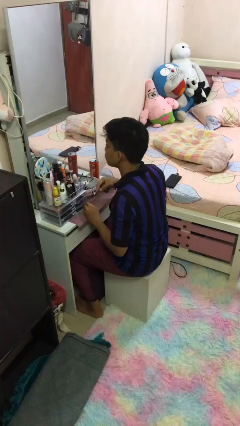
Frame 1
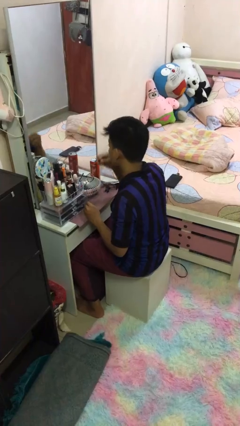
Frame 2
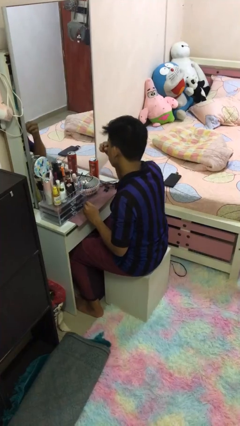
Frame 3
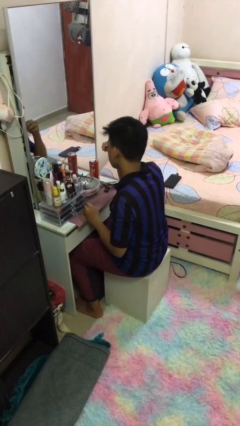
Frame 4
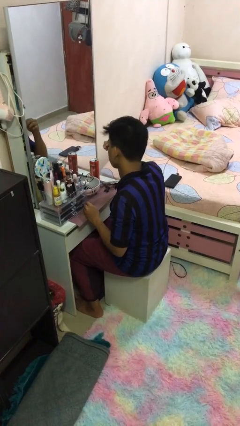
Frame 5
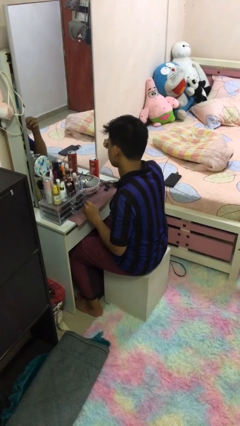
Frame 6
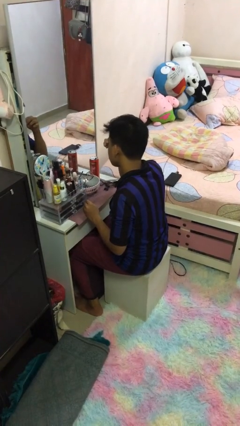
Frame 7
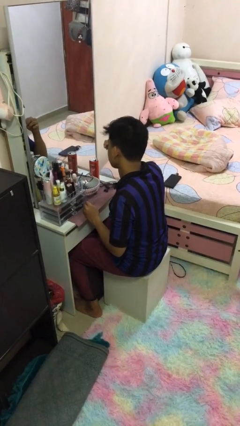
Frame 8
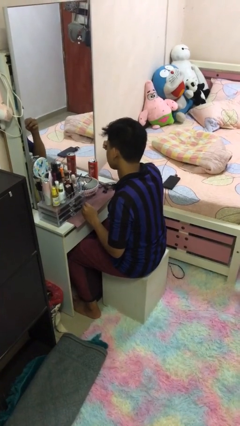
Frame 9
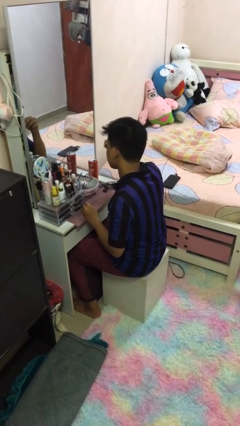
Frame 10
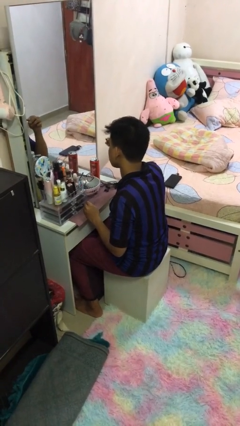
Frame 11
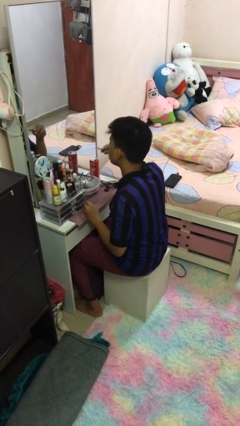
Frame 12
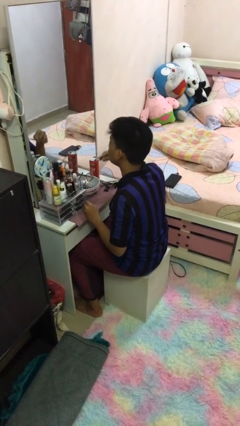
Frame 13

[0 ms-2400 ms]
person applies eye makeup

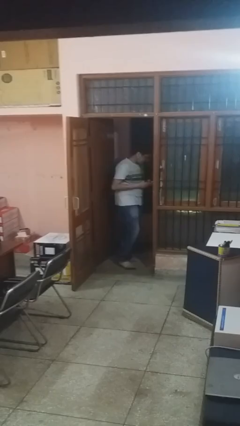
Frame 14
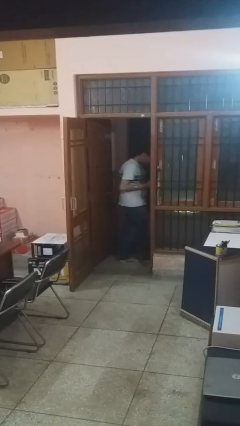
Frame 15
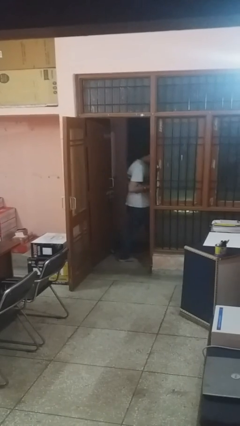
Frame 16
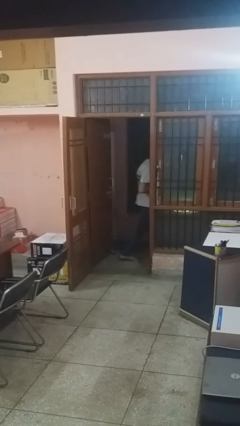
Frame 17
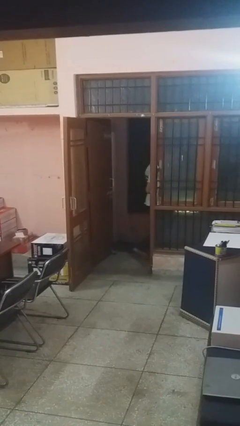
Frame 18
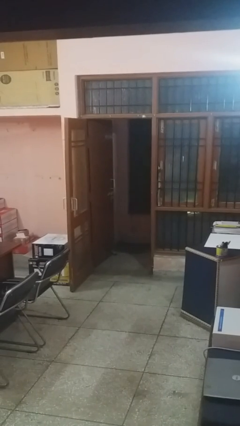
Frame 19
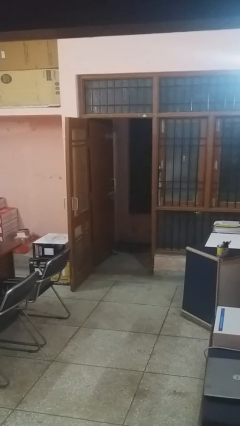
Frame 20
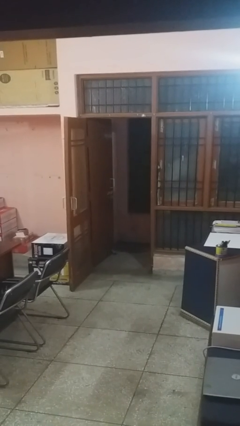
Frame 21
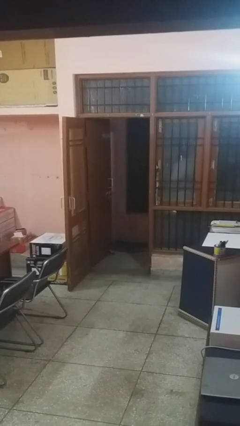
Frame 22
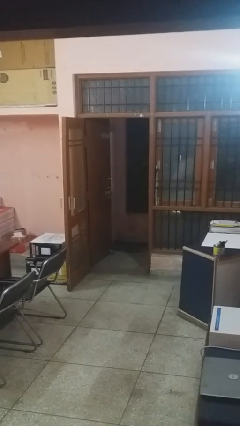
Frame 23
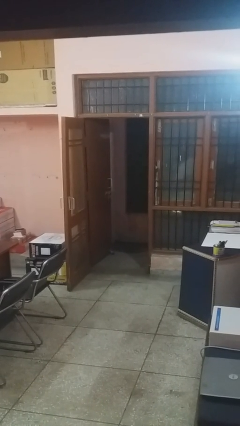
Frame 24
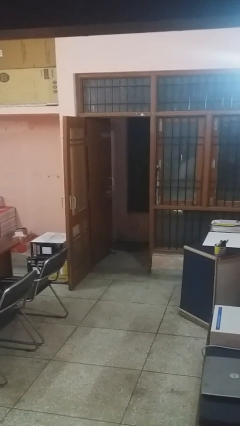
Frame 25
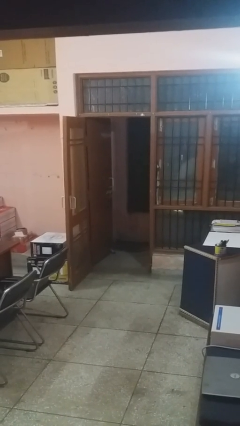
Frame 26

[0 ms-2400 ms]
person exits scene through structure

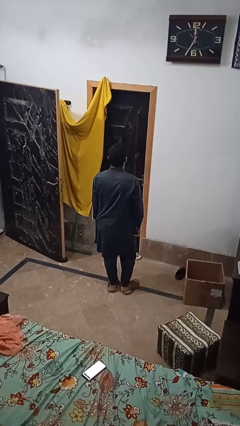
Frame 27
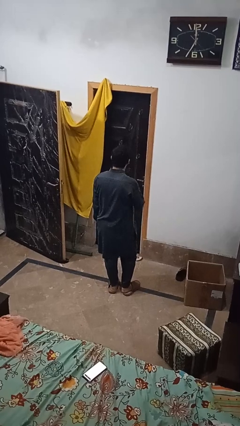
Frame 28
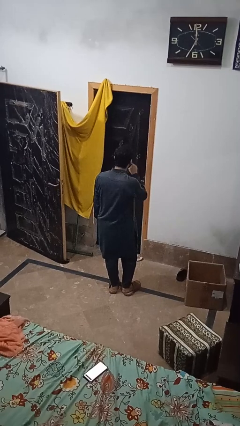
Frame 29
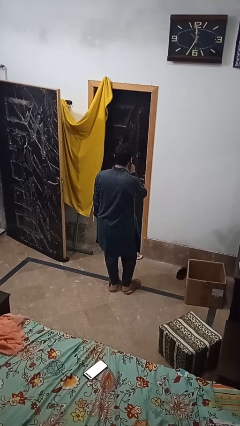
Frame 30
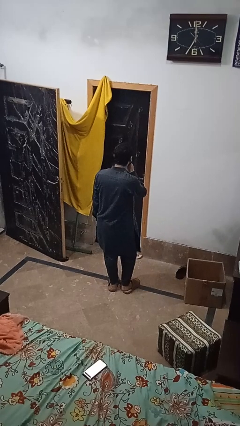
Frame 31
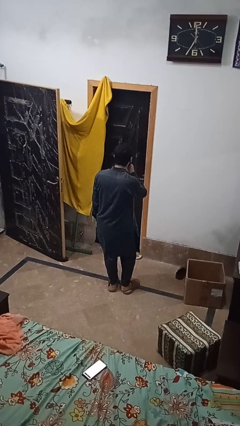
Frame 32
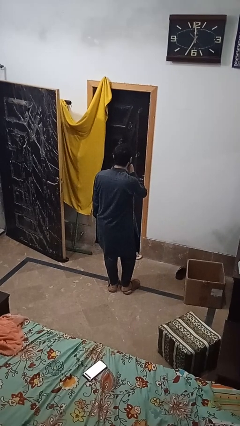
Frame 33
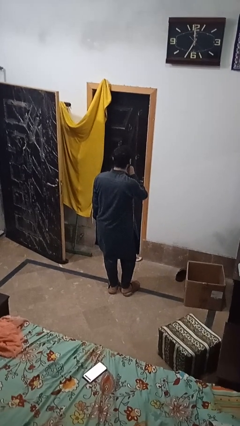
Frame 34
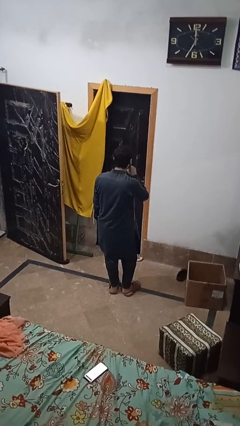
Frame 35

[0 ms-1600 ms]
person gestures be quiet

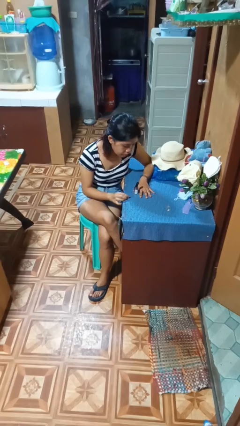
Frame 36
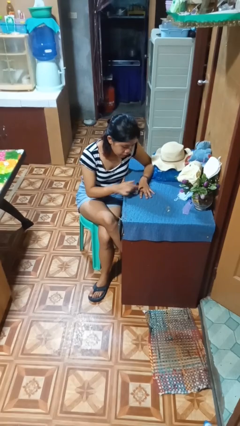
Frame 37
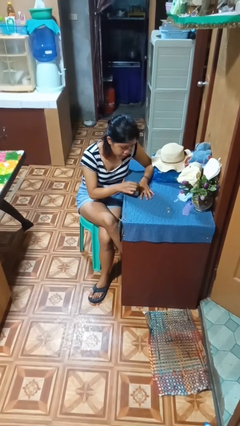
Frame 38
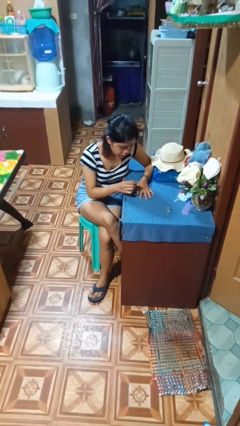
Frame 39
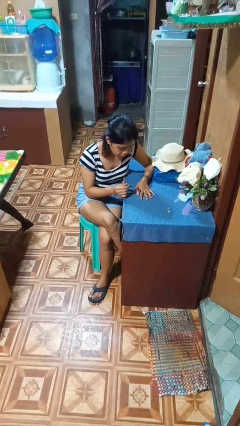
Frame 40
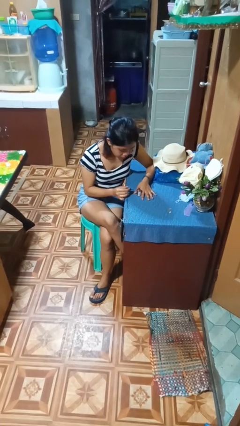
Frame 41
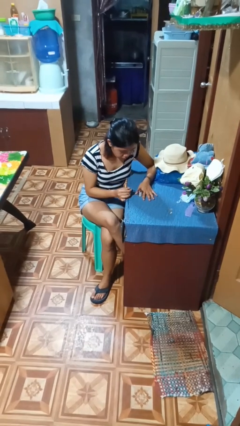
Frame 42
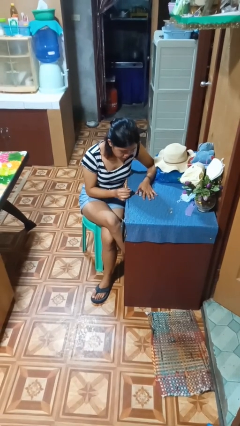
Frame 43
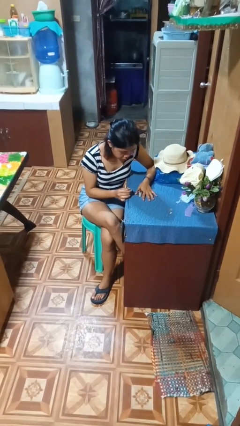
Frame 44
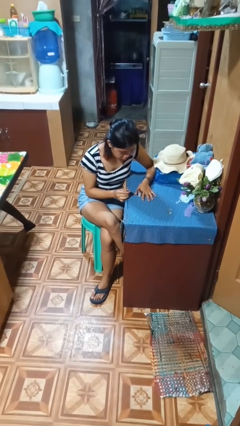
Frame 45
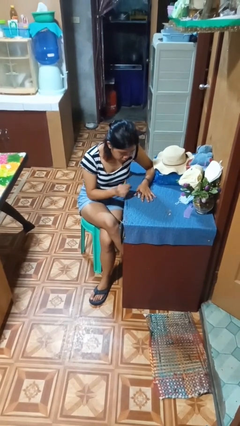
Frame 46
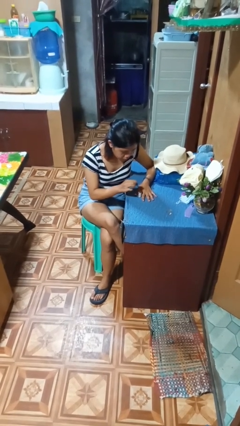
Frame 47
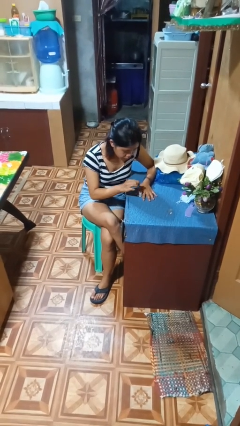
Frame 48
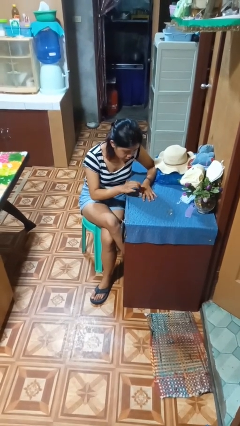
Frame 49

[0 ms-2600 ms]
person paints fingernails

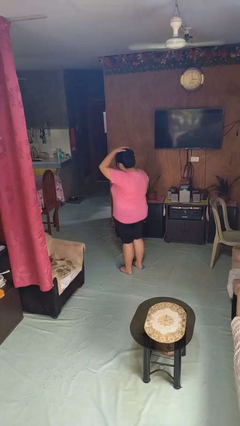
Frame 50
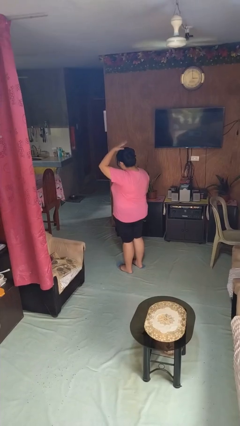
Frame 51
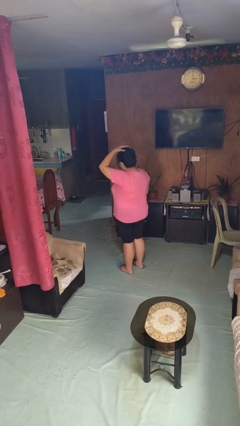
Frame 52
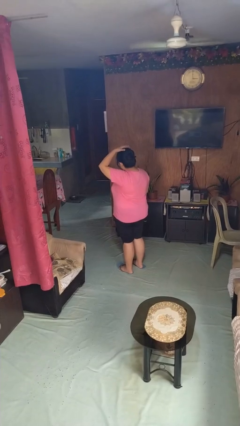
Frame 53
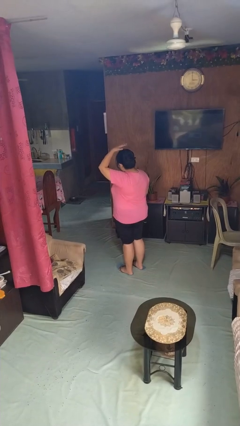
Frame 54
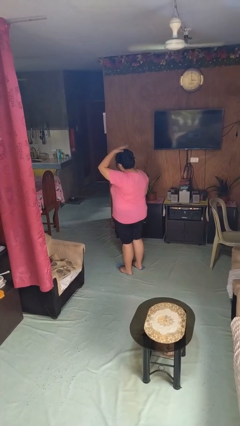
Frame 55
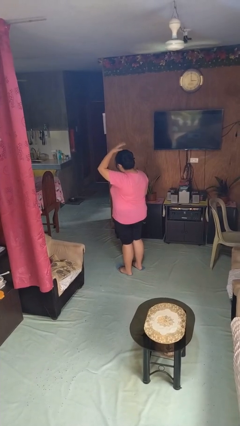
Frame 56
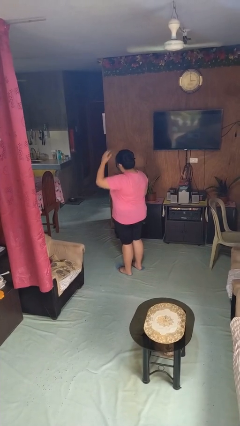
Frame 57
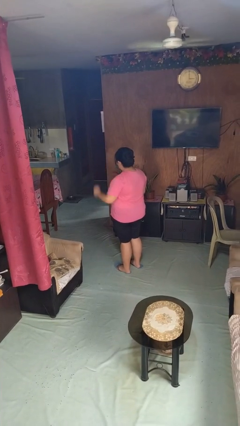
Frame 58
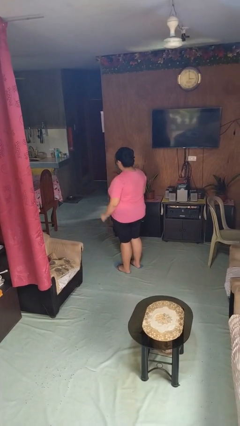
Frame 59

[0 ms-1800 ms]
person pats head

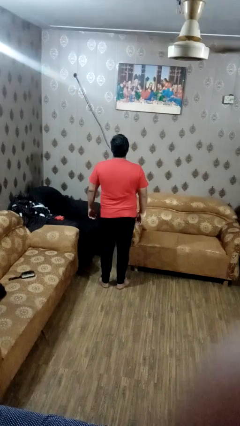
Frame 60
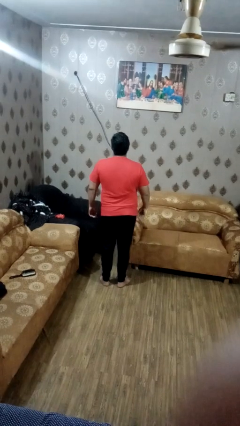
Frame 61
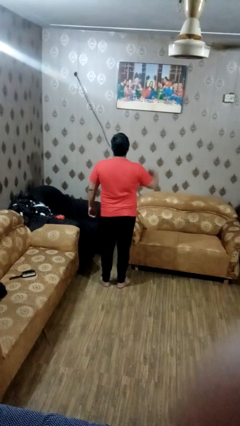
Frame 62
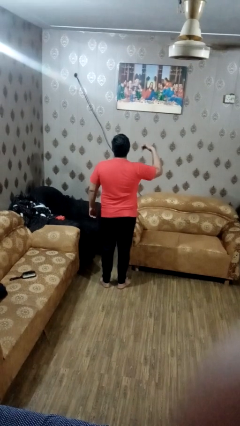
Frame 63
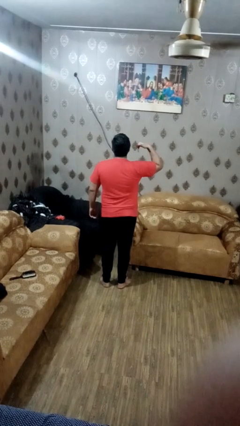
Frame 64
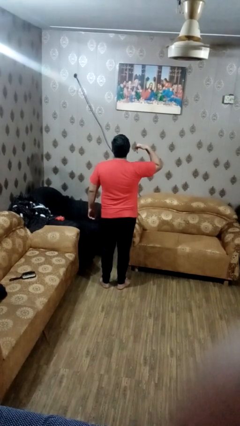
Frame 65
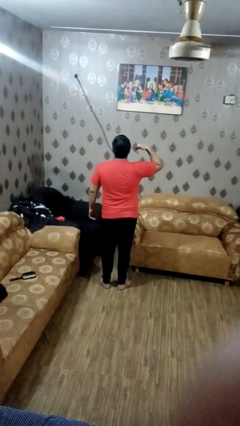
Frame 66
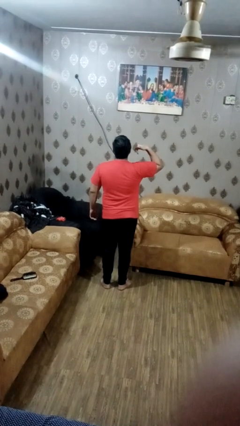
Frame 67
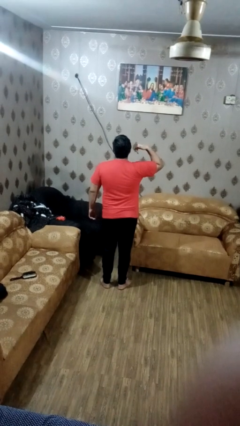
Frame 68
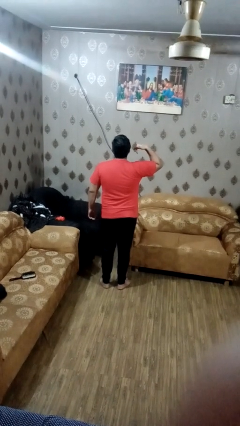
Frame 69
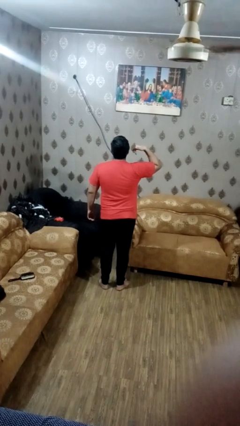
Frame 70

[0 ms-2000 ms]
person gestures call me

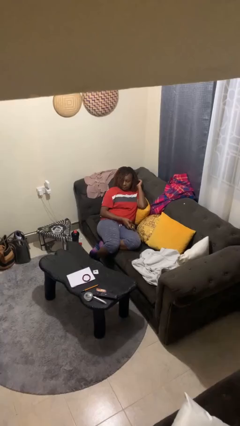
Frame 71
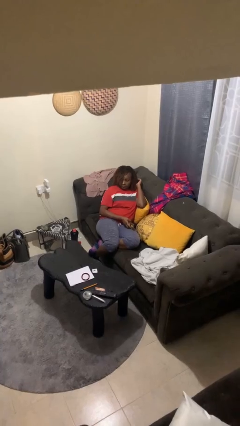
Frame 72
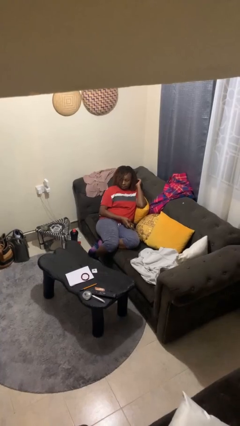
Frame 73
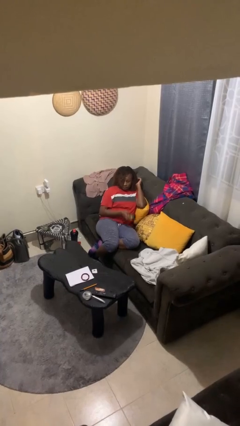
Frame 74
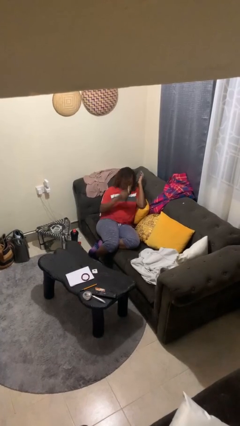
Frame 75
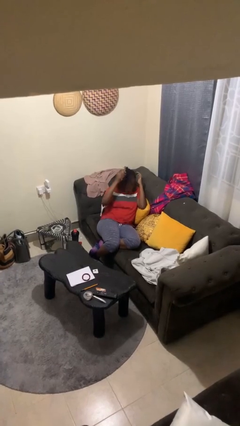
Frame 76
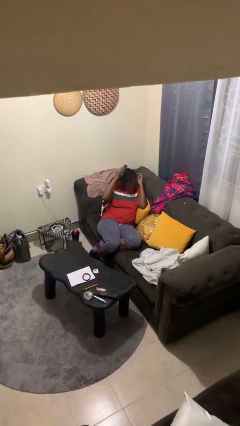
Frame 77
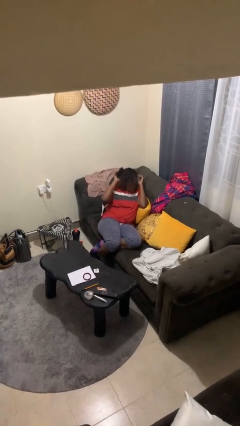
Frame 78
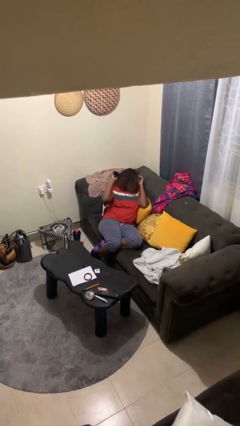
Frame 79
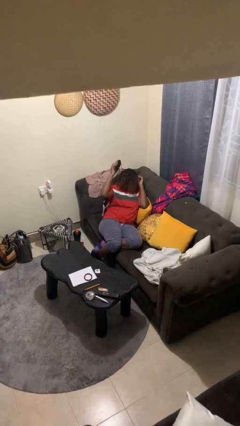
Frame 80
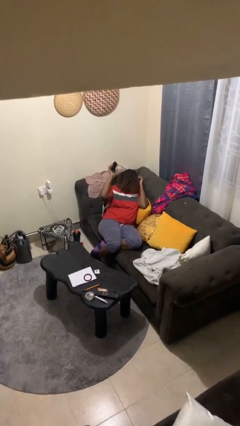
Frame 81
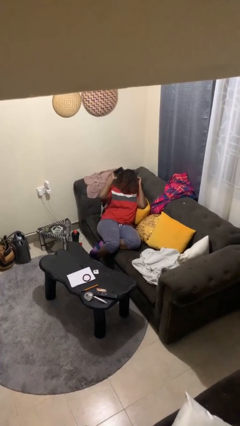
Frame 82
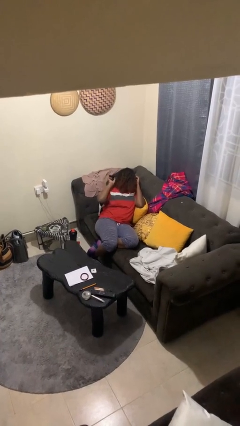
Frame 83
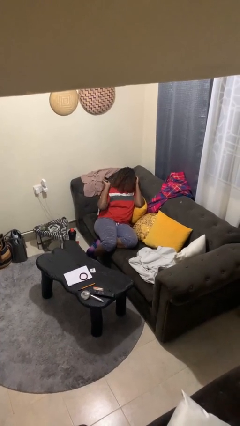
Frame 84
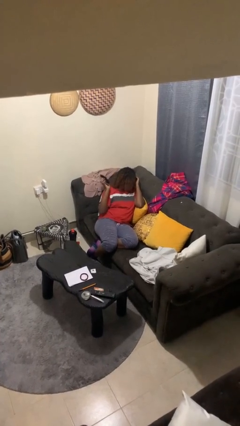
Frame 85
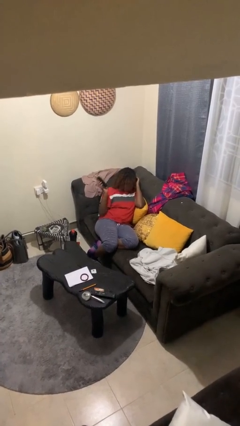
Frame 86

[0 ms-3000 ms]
person brushes hair

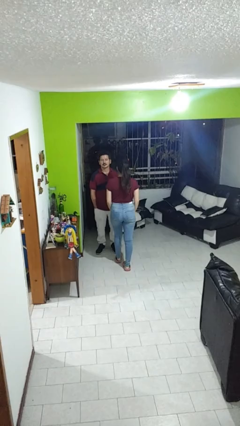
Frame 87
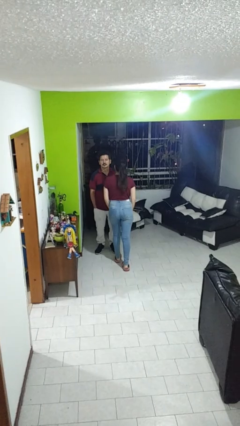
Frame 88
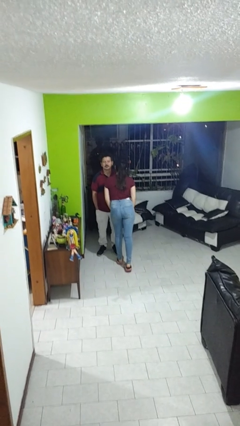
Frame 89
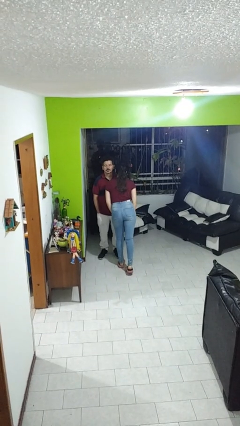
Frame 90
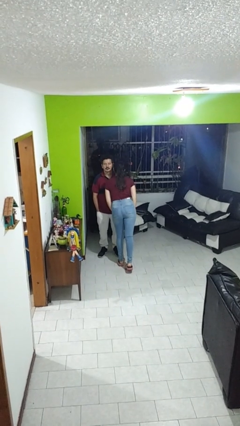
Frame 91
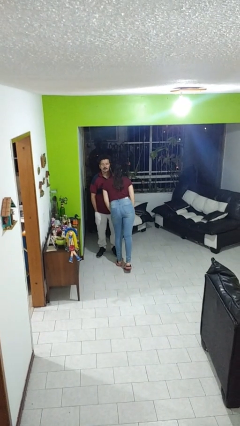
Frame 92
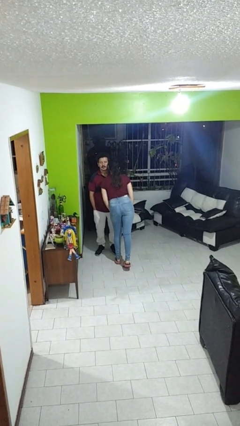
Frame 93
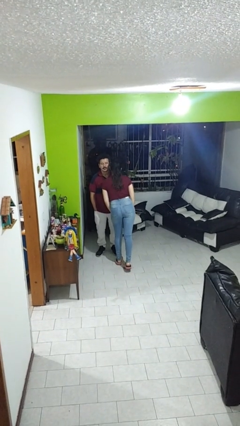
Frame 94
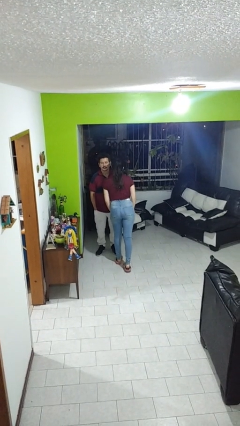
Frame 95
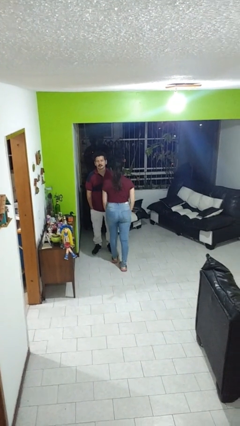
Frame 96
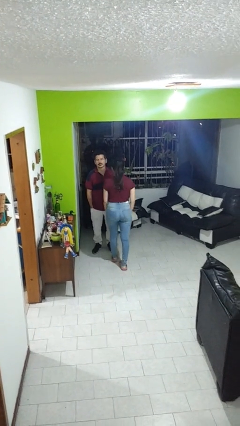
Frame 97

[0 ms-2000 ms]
person kisses cheek of person
